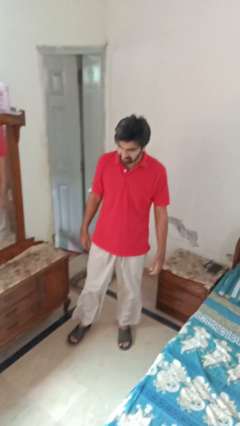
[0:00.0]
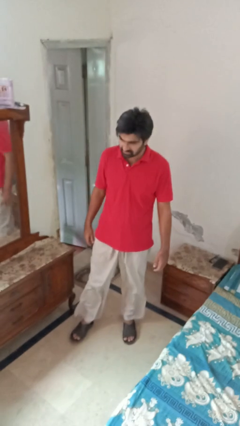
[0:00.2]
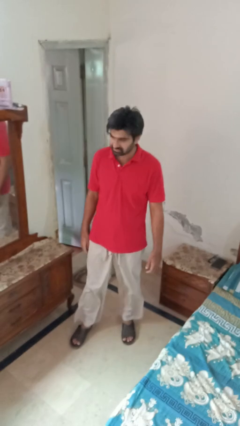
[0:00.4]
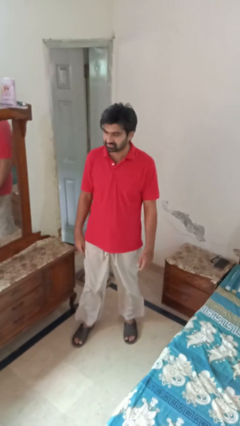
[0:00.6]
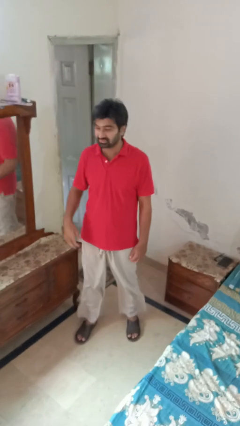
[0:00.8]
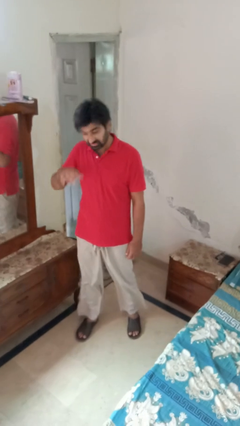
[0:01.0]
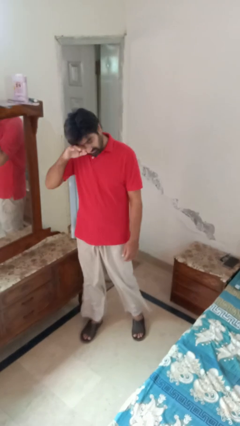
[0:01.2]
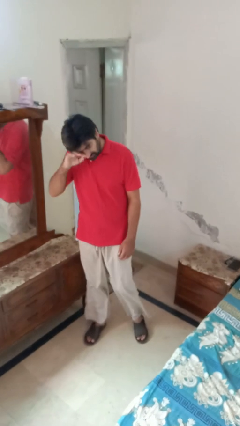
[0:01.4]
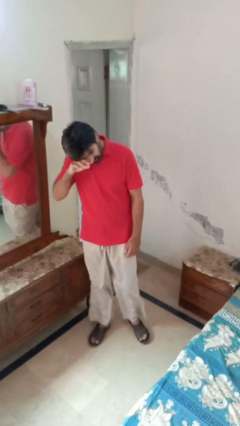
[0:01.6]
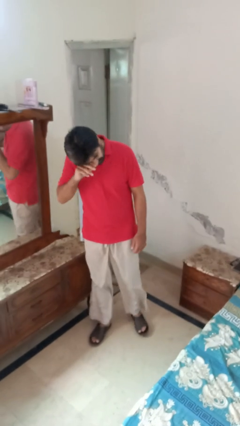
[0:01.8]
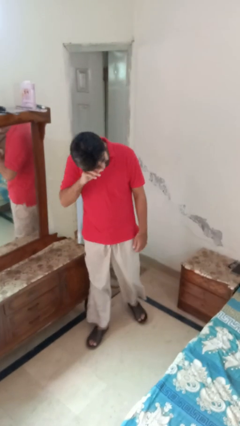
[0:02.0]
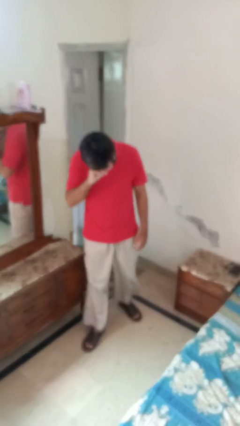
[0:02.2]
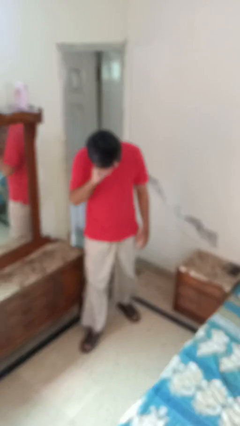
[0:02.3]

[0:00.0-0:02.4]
person rubs eyes

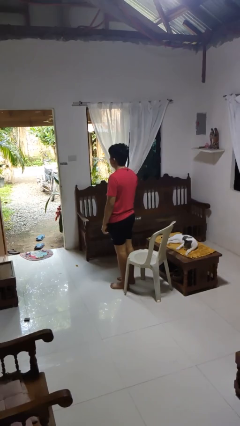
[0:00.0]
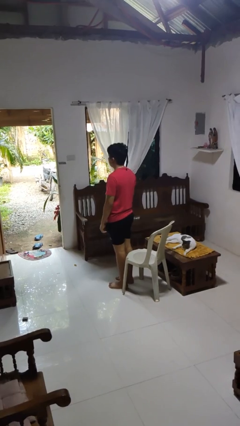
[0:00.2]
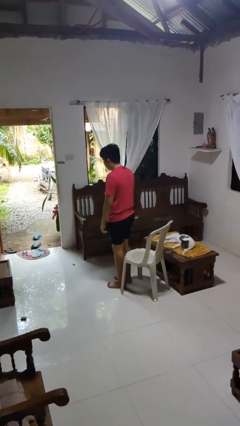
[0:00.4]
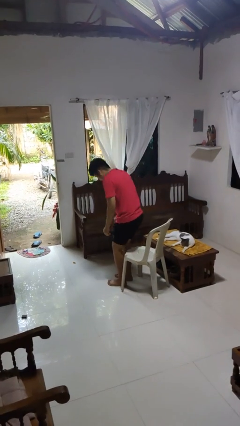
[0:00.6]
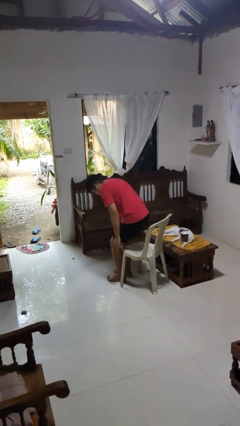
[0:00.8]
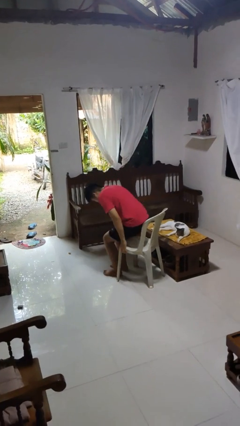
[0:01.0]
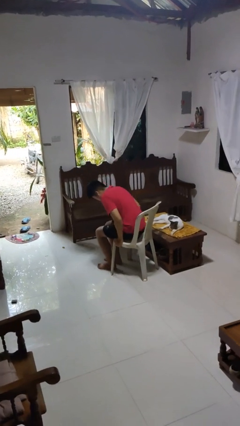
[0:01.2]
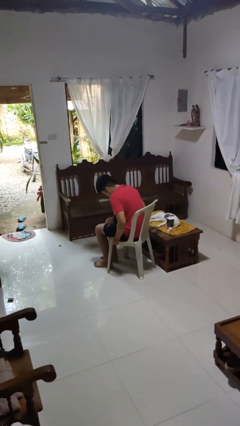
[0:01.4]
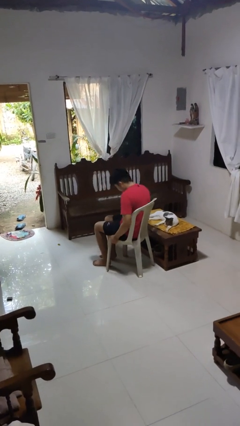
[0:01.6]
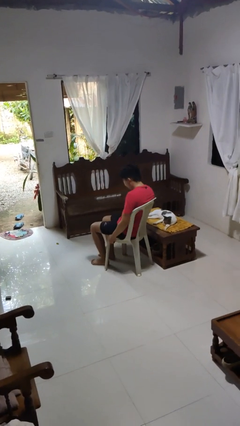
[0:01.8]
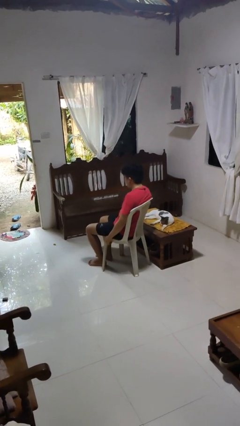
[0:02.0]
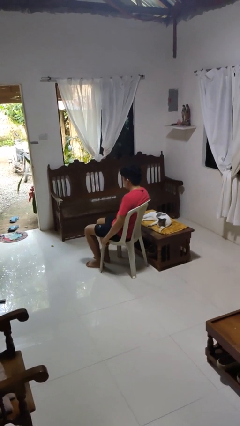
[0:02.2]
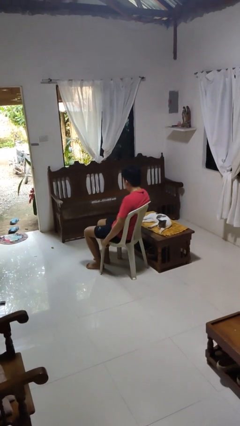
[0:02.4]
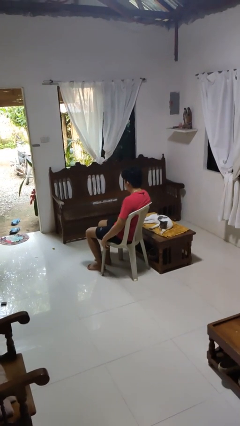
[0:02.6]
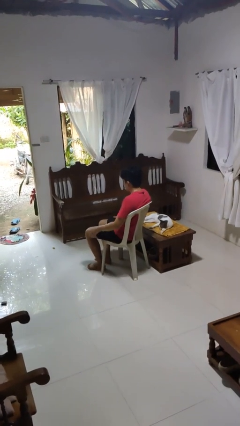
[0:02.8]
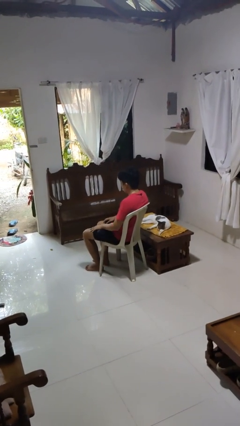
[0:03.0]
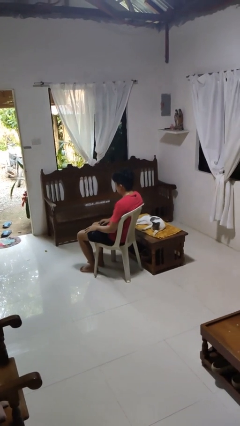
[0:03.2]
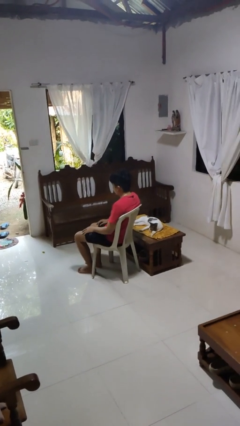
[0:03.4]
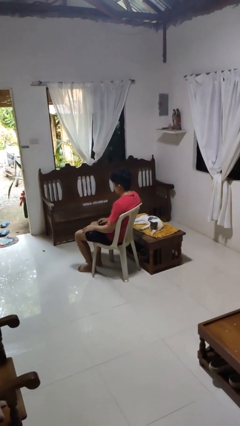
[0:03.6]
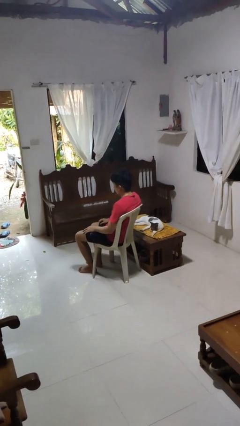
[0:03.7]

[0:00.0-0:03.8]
person sits down

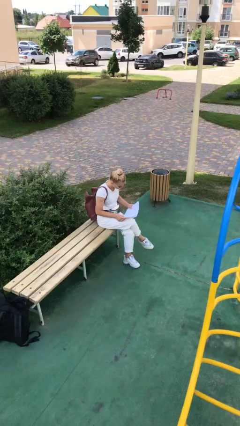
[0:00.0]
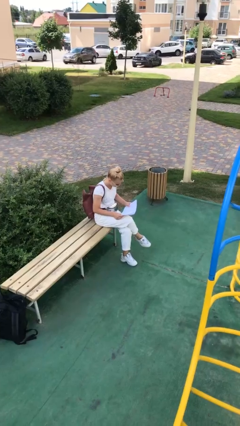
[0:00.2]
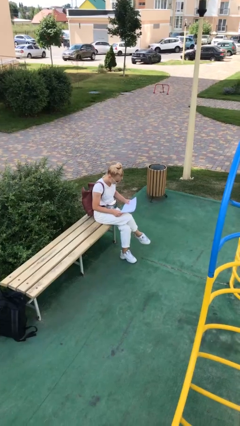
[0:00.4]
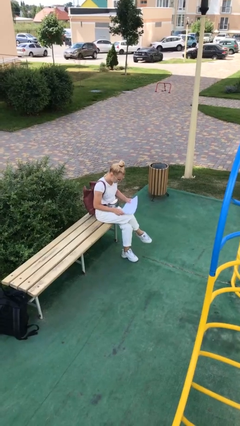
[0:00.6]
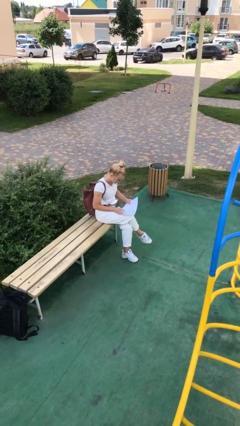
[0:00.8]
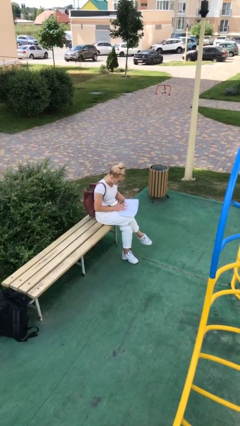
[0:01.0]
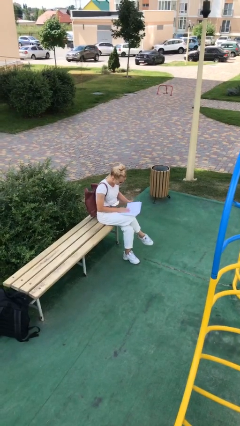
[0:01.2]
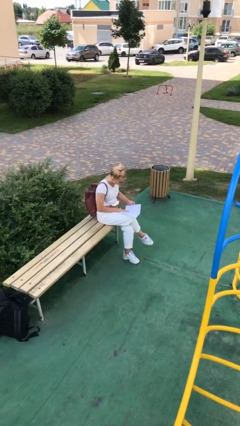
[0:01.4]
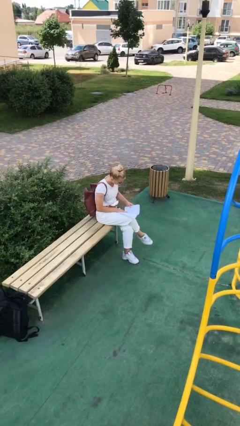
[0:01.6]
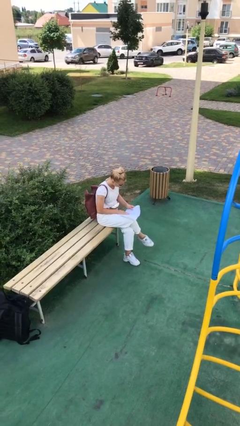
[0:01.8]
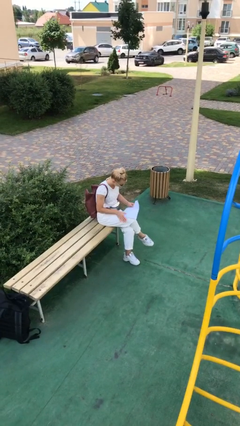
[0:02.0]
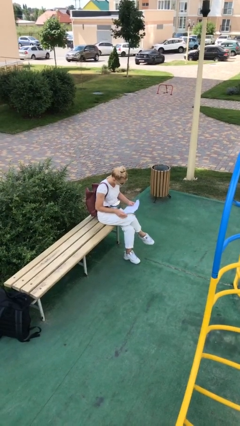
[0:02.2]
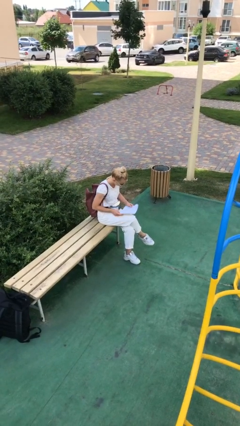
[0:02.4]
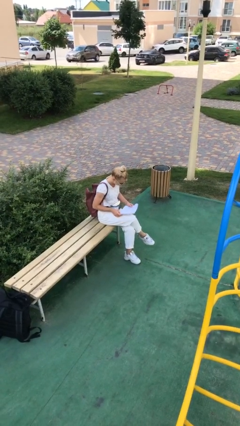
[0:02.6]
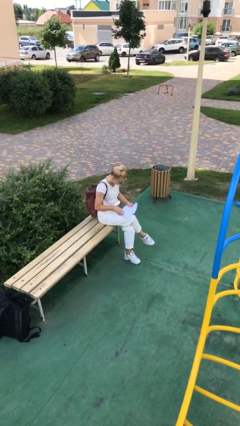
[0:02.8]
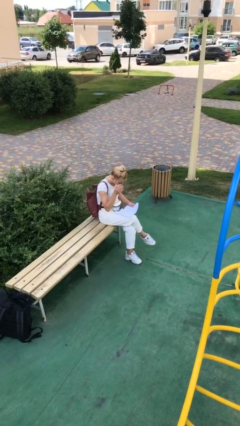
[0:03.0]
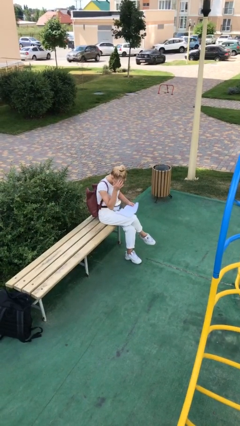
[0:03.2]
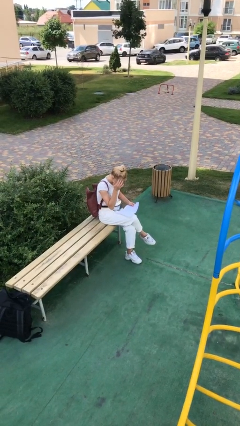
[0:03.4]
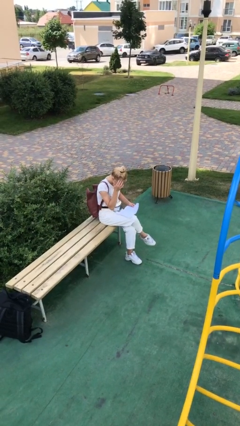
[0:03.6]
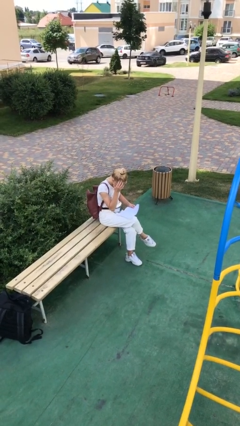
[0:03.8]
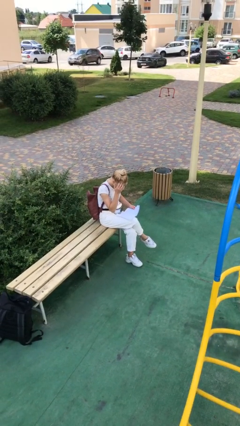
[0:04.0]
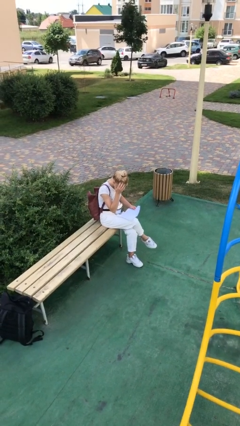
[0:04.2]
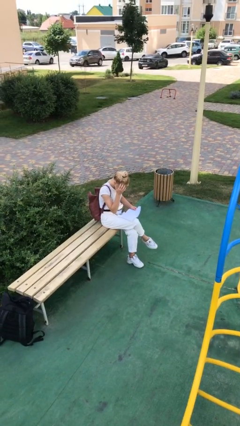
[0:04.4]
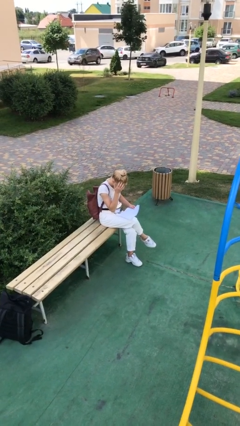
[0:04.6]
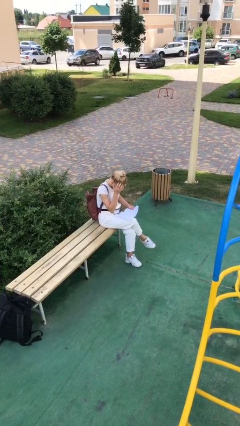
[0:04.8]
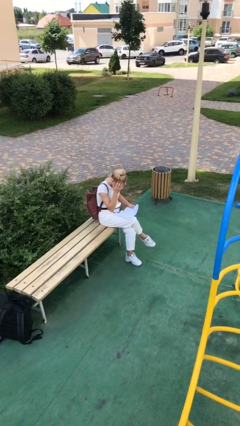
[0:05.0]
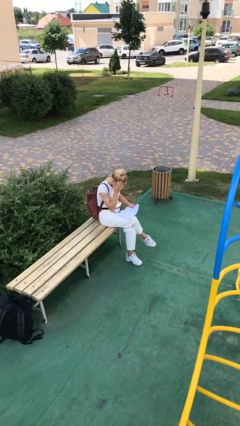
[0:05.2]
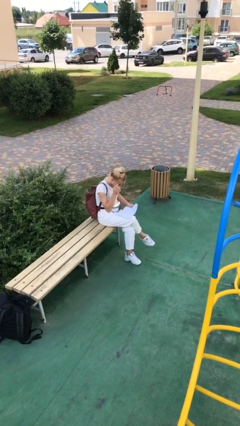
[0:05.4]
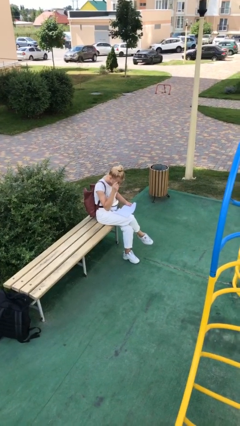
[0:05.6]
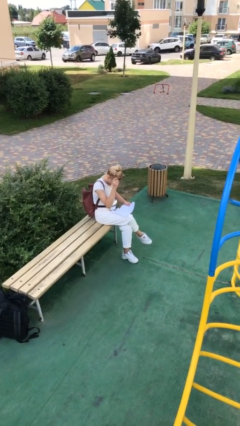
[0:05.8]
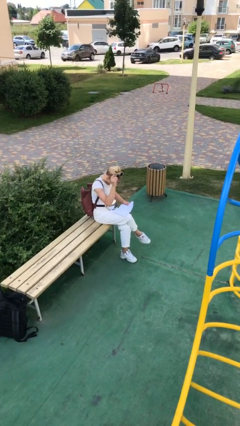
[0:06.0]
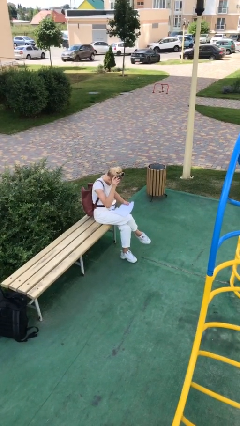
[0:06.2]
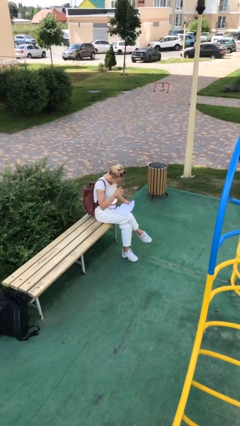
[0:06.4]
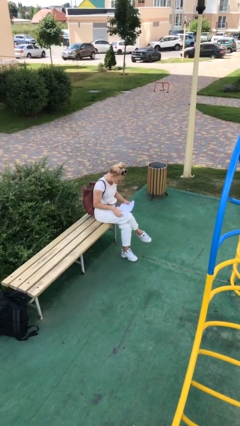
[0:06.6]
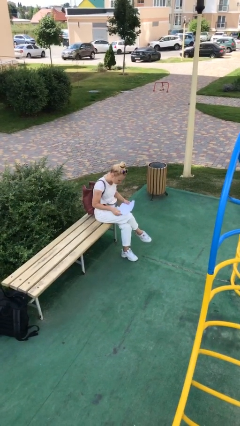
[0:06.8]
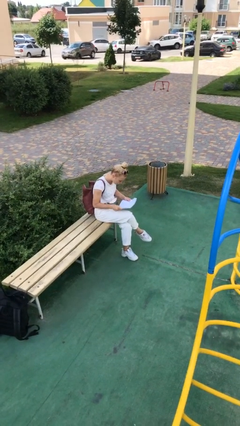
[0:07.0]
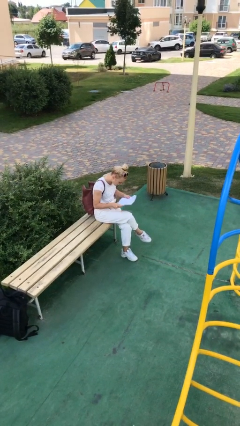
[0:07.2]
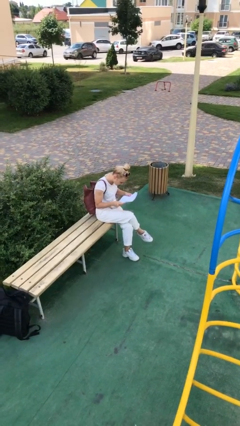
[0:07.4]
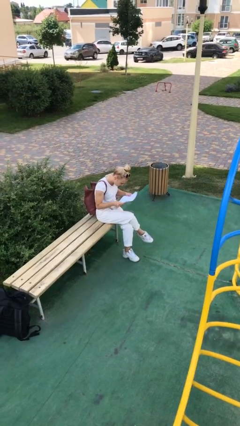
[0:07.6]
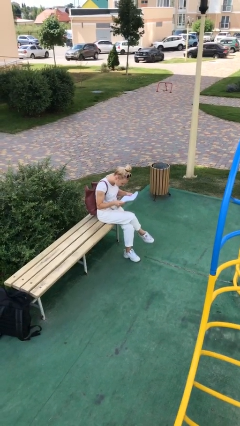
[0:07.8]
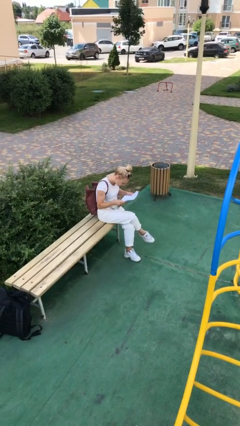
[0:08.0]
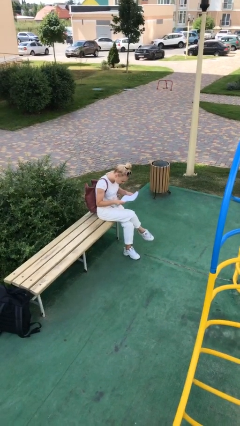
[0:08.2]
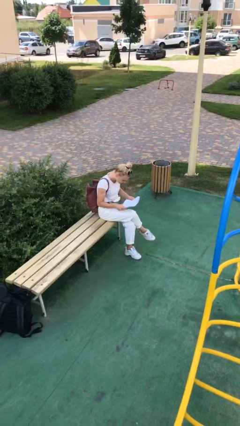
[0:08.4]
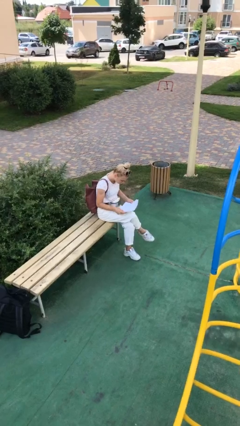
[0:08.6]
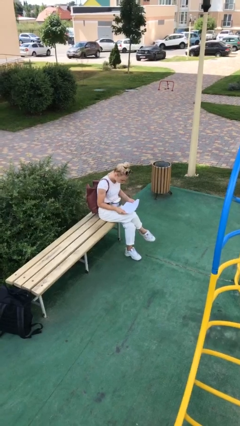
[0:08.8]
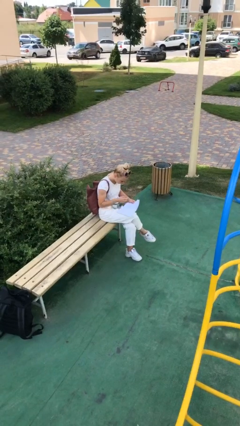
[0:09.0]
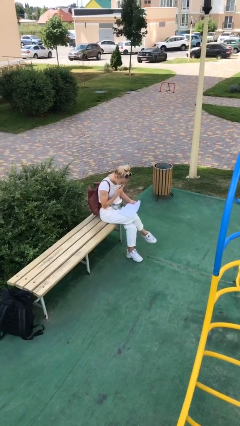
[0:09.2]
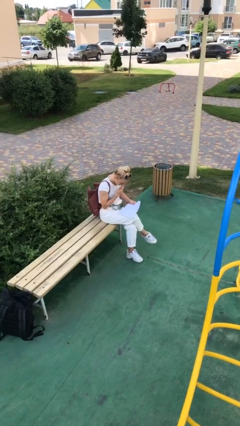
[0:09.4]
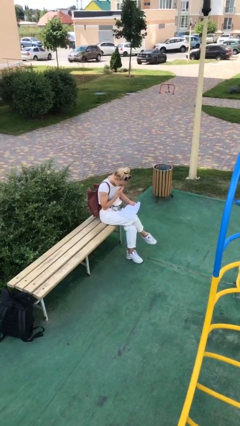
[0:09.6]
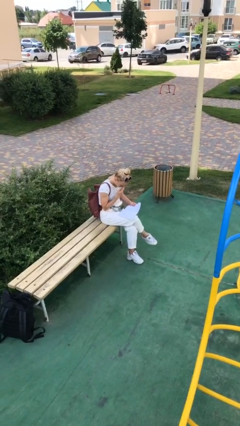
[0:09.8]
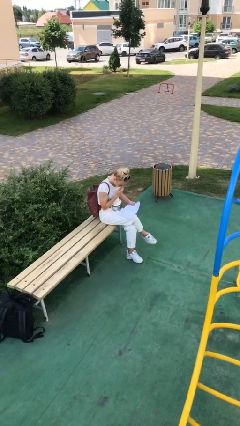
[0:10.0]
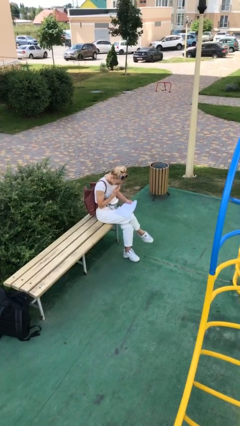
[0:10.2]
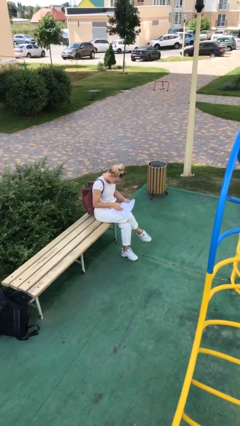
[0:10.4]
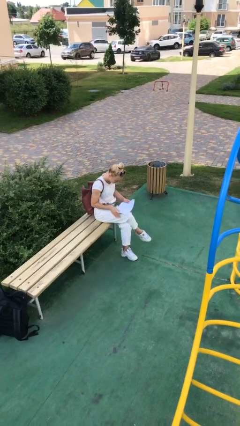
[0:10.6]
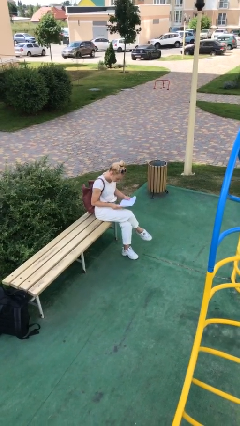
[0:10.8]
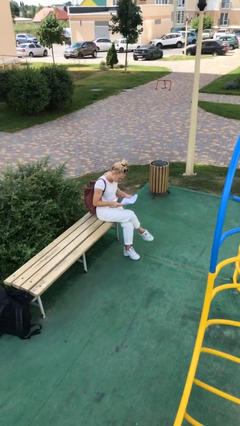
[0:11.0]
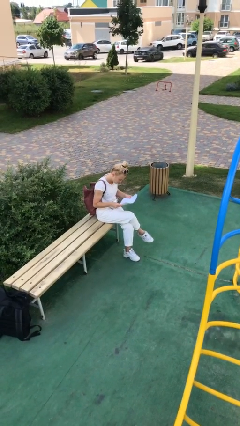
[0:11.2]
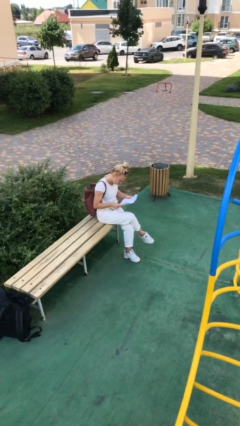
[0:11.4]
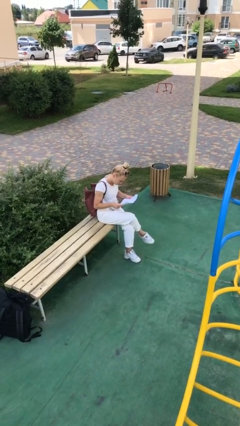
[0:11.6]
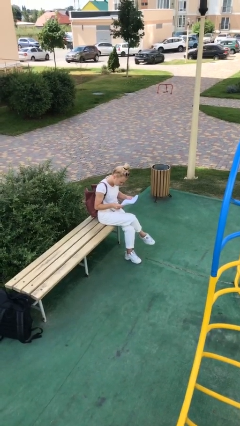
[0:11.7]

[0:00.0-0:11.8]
person reads document

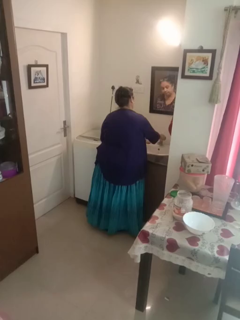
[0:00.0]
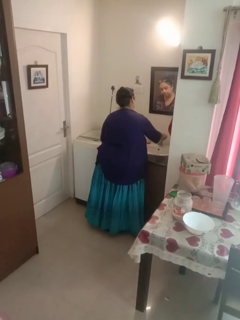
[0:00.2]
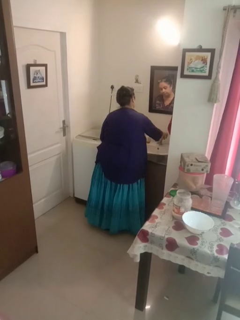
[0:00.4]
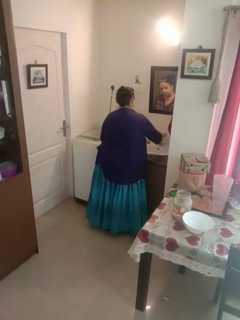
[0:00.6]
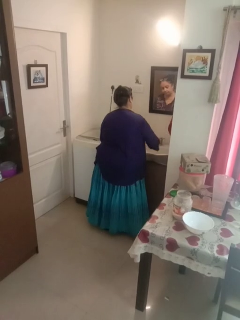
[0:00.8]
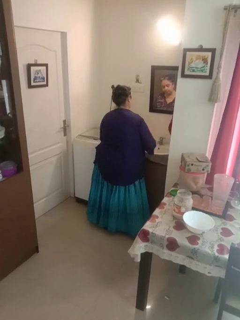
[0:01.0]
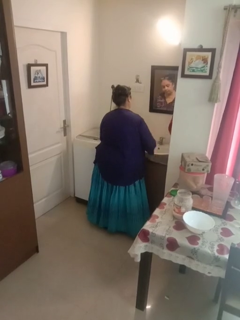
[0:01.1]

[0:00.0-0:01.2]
person turns on faucet
